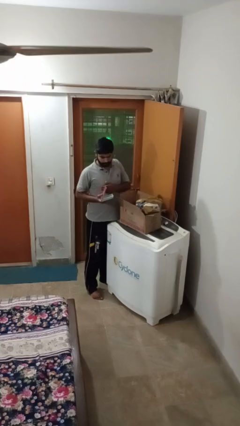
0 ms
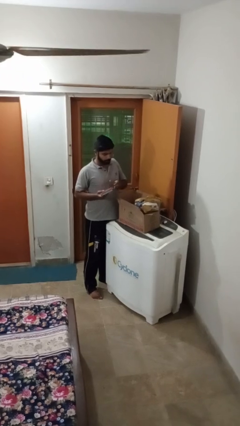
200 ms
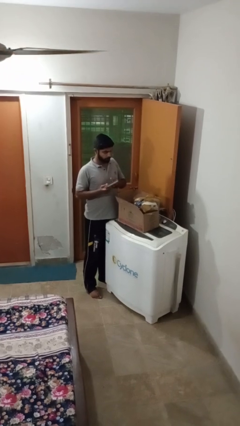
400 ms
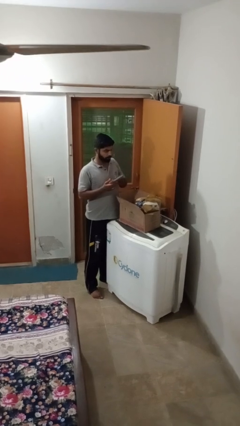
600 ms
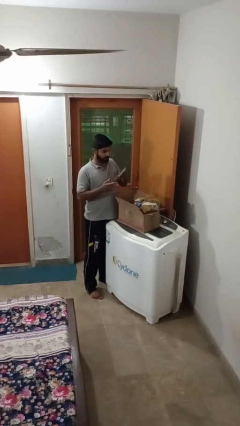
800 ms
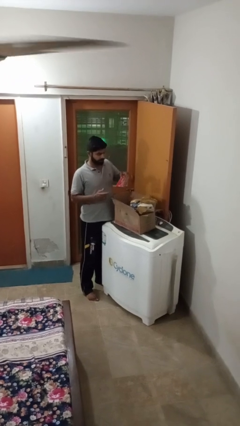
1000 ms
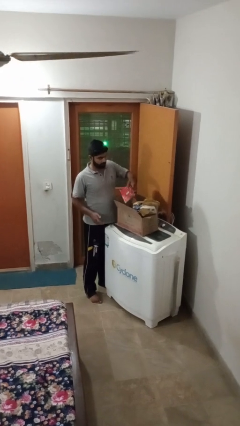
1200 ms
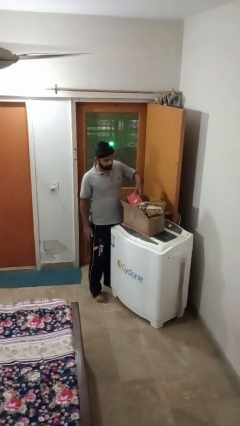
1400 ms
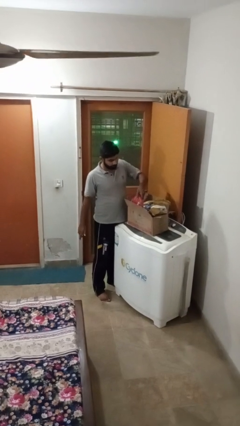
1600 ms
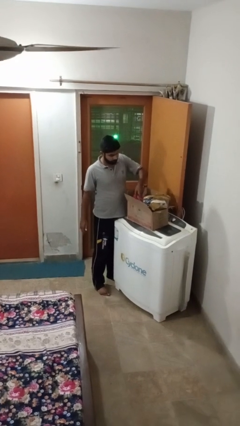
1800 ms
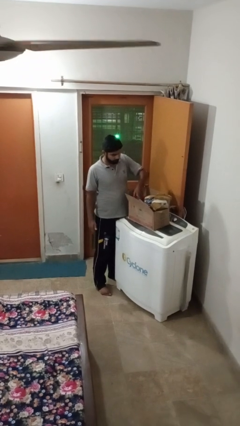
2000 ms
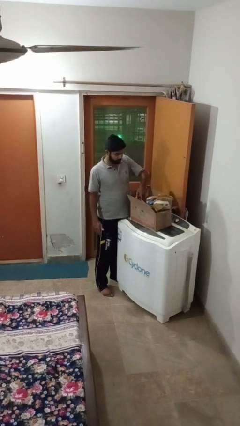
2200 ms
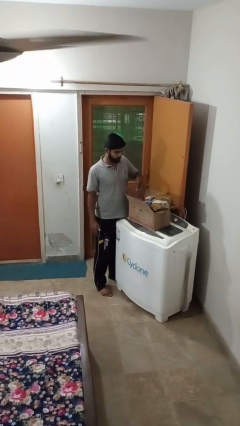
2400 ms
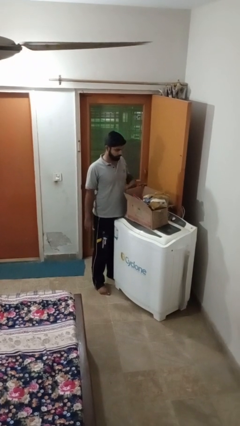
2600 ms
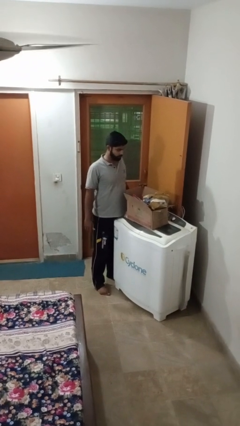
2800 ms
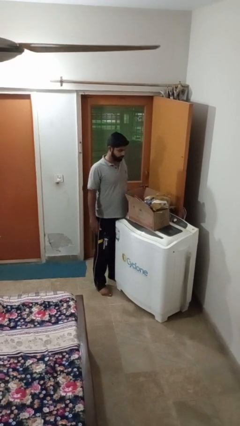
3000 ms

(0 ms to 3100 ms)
person puts object into box

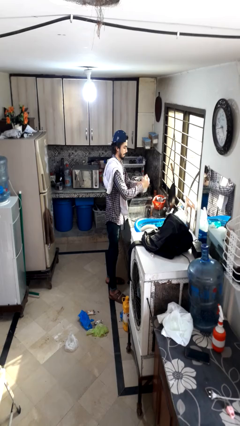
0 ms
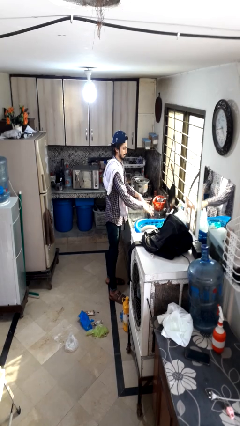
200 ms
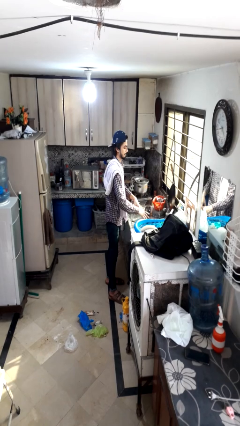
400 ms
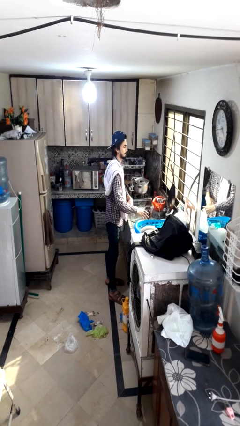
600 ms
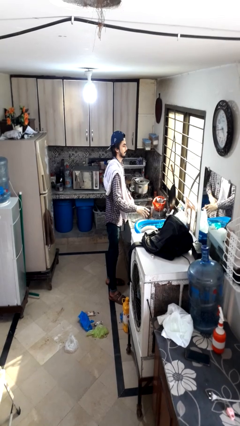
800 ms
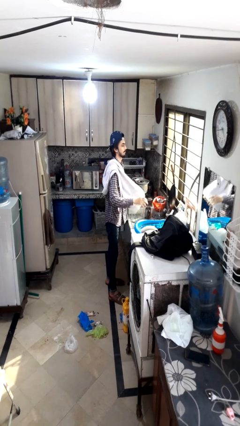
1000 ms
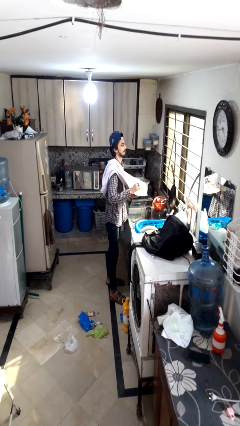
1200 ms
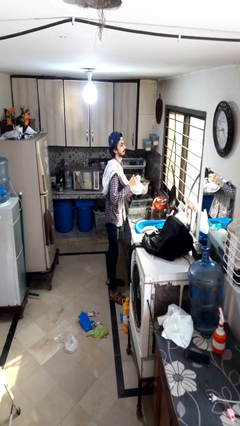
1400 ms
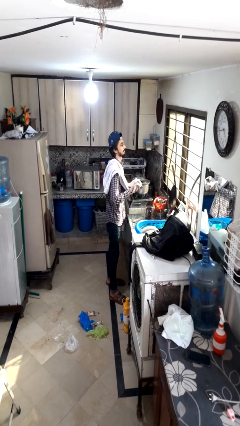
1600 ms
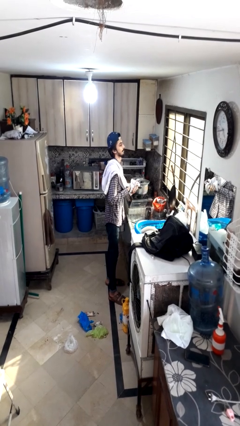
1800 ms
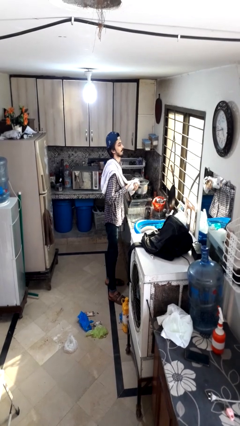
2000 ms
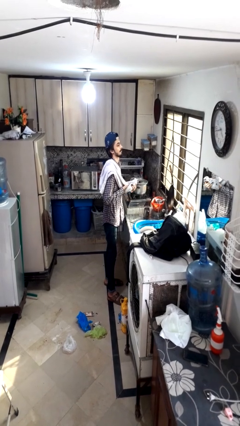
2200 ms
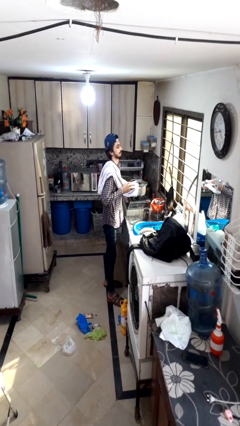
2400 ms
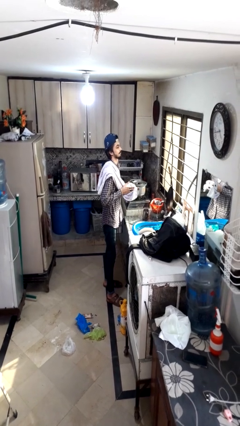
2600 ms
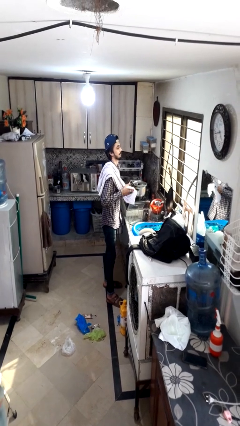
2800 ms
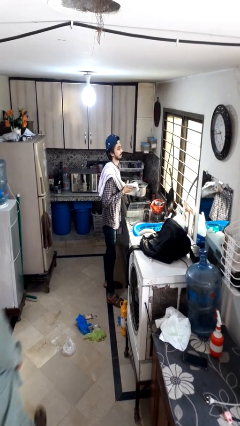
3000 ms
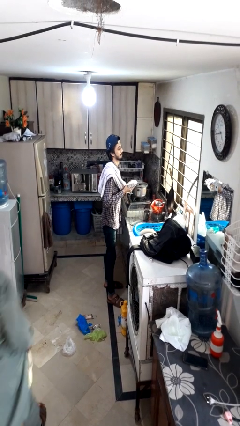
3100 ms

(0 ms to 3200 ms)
person dries hands with towel

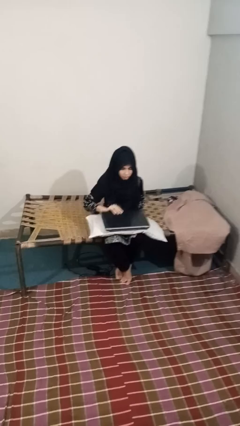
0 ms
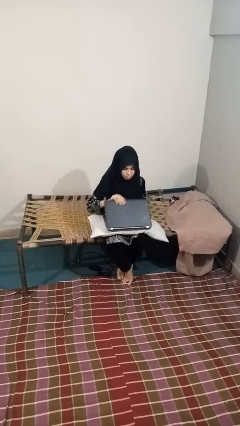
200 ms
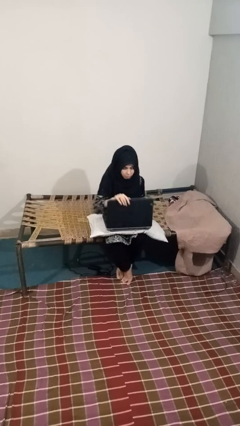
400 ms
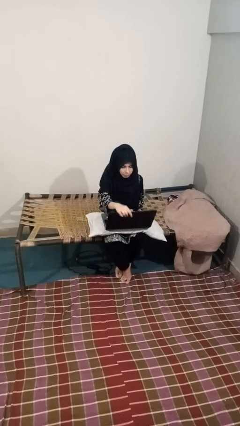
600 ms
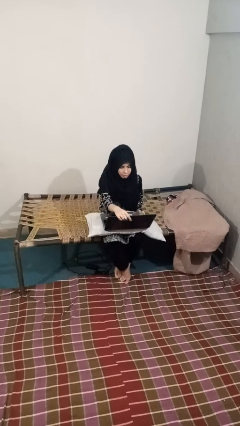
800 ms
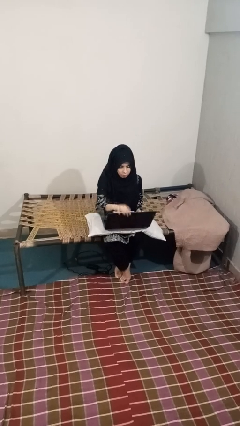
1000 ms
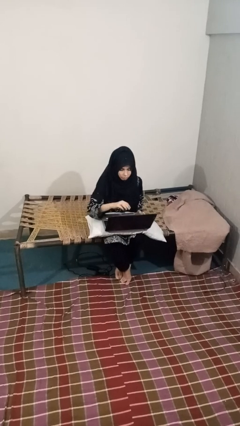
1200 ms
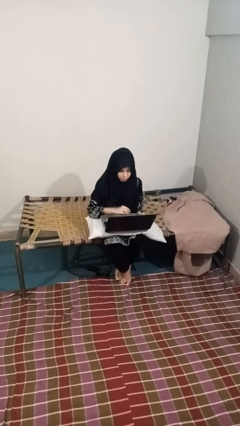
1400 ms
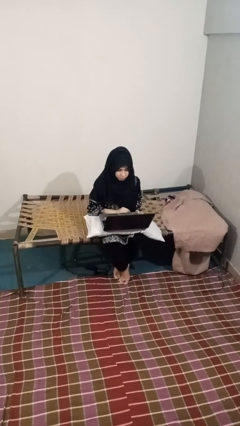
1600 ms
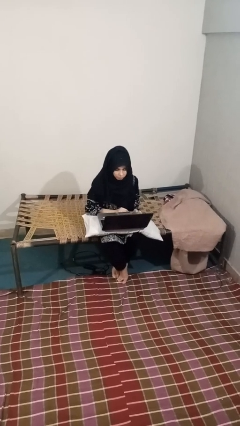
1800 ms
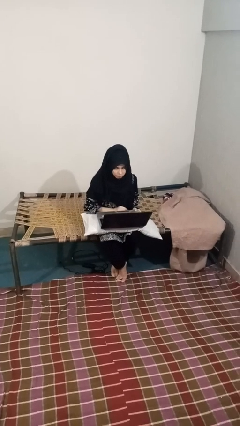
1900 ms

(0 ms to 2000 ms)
person opens laptop

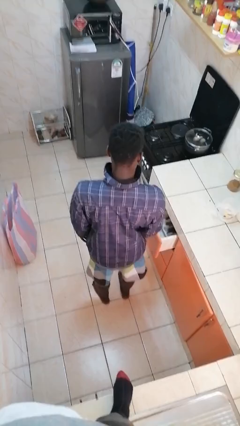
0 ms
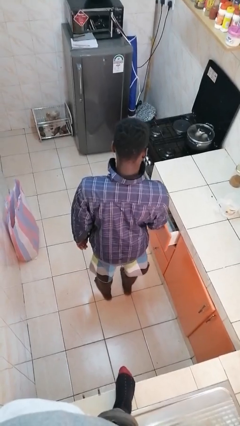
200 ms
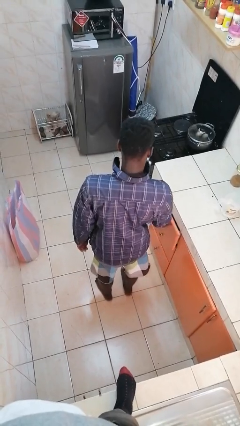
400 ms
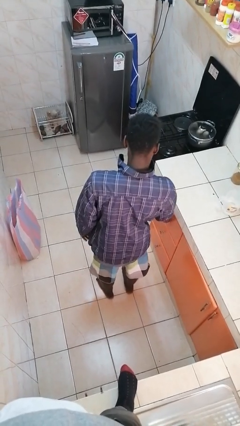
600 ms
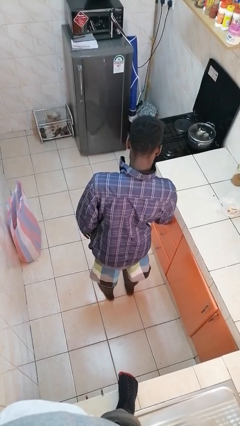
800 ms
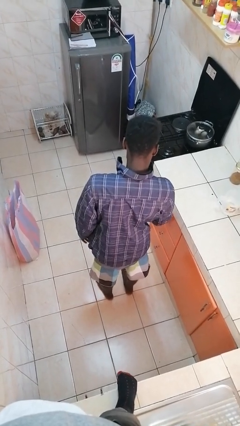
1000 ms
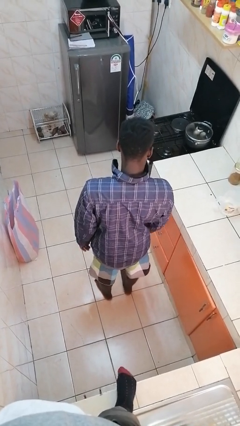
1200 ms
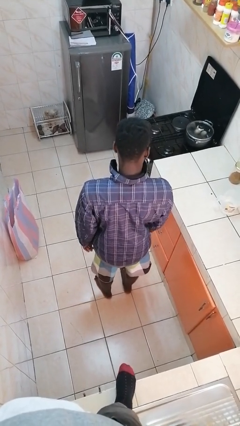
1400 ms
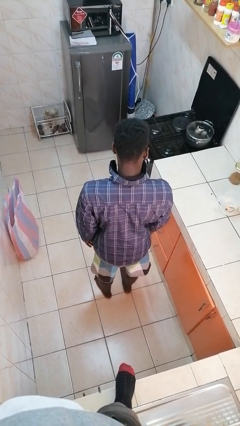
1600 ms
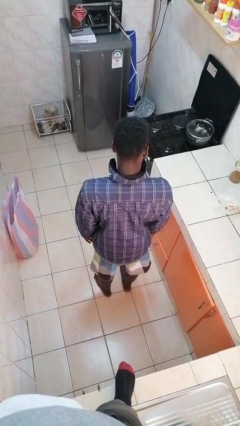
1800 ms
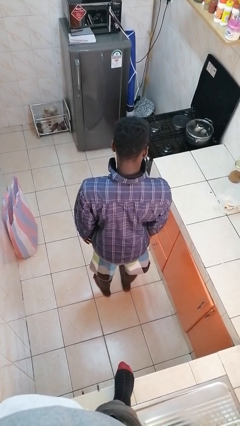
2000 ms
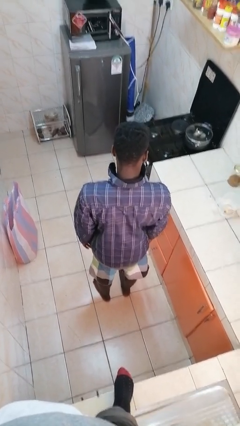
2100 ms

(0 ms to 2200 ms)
person closes kitchen drawer

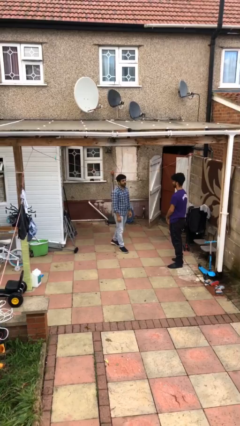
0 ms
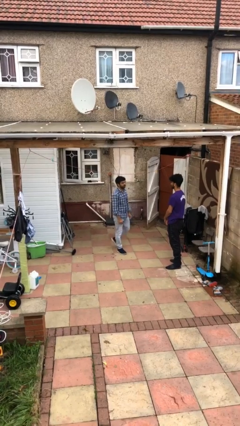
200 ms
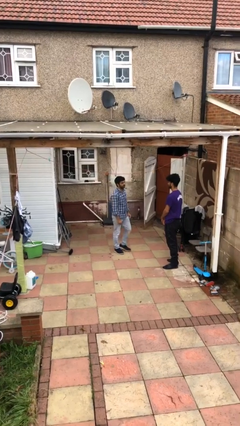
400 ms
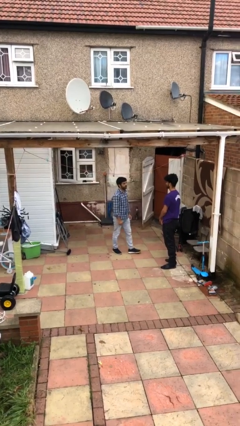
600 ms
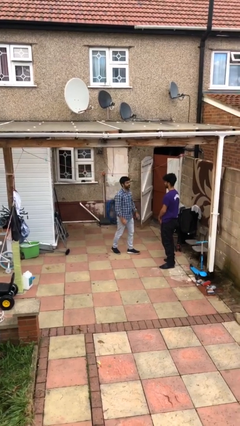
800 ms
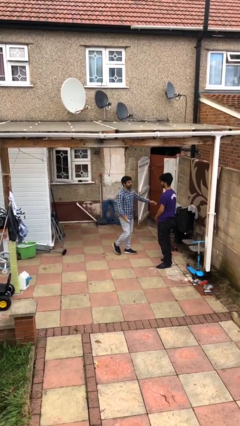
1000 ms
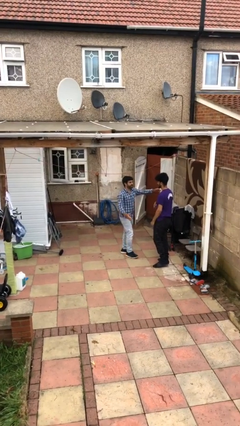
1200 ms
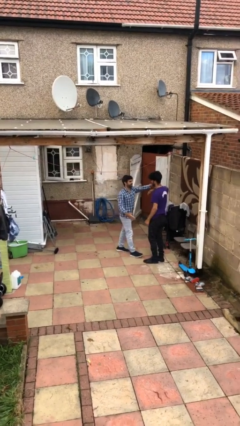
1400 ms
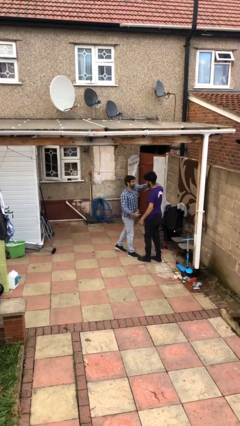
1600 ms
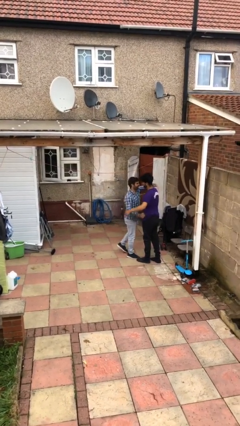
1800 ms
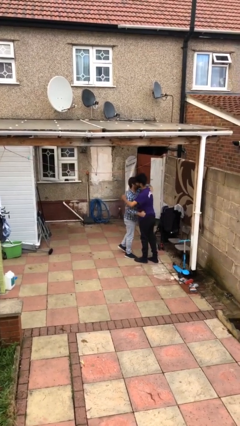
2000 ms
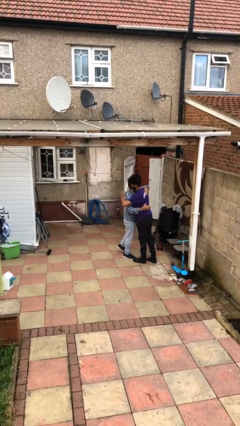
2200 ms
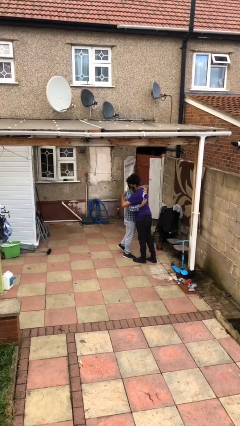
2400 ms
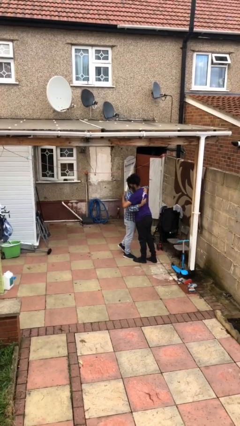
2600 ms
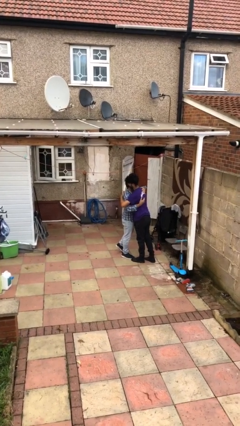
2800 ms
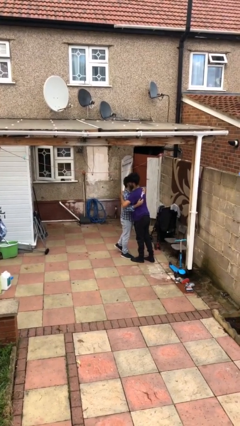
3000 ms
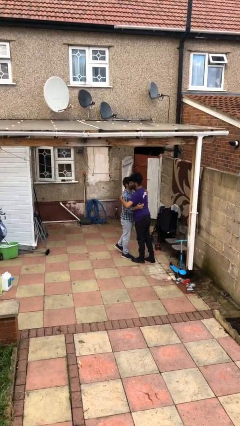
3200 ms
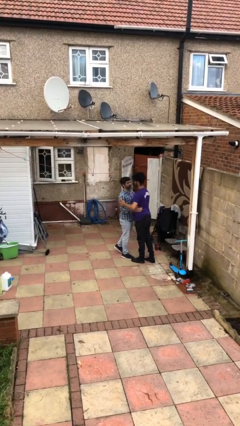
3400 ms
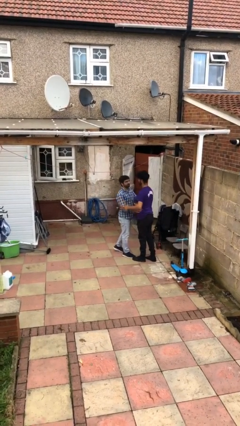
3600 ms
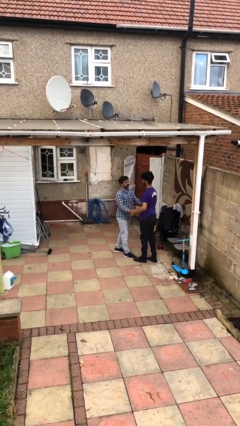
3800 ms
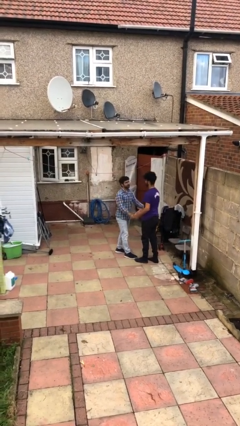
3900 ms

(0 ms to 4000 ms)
person embraces person

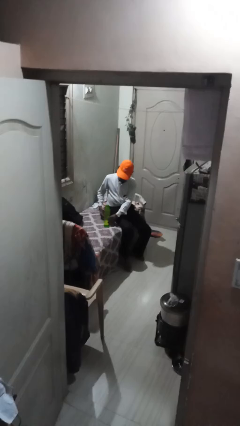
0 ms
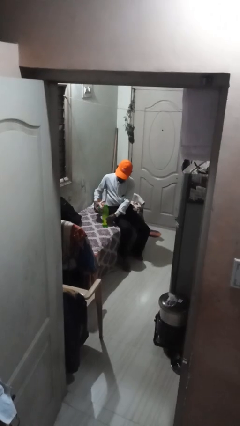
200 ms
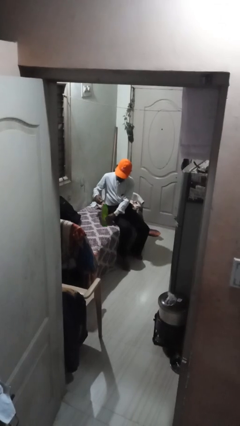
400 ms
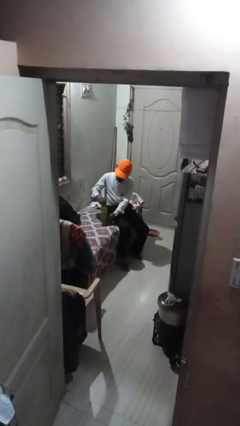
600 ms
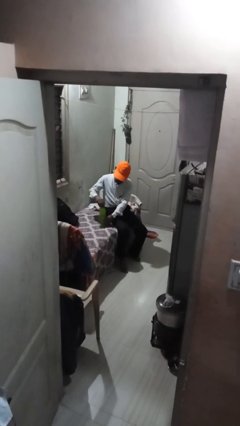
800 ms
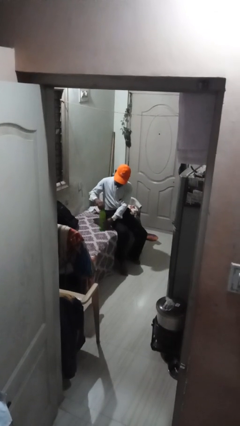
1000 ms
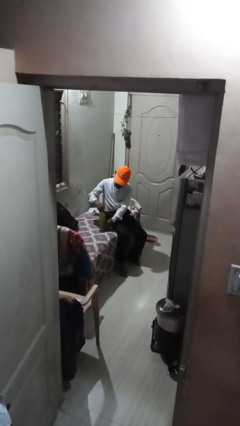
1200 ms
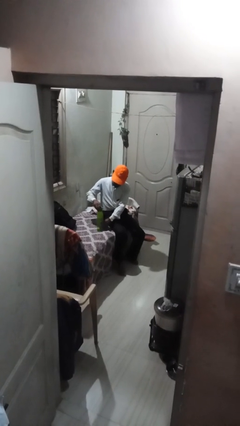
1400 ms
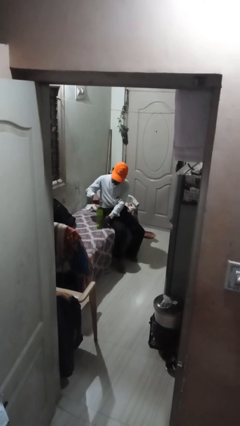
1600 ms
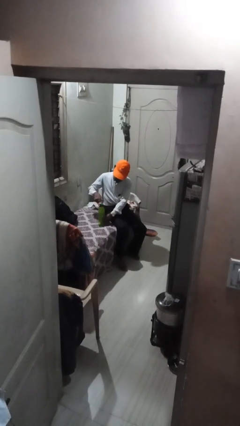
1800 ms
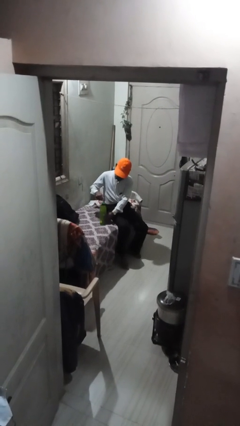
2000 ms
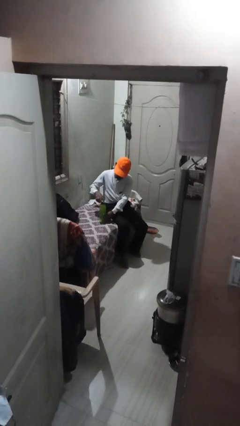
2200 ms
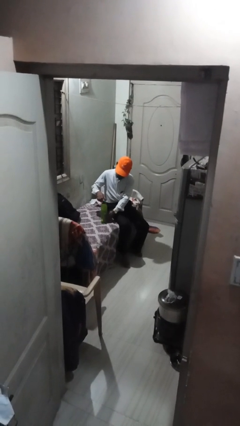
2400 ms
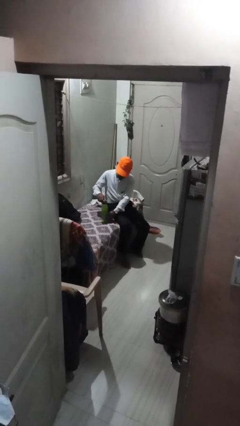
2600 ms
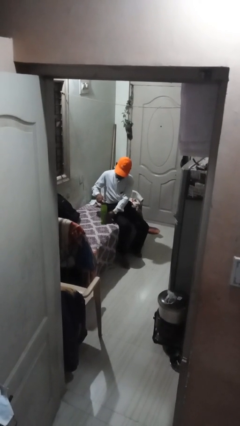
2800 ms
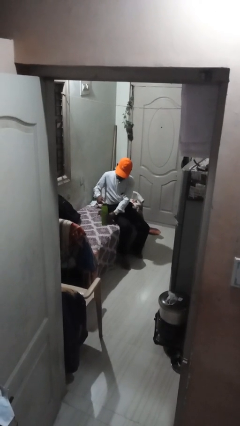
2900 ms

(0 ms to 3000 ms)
person screws lid to bottle

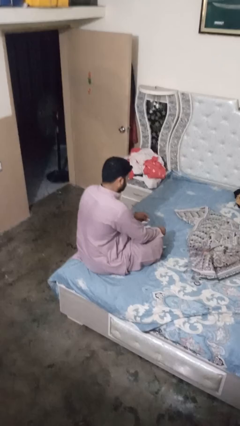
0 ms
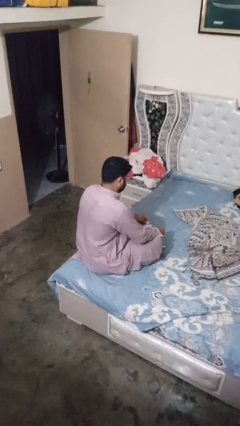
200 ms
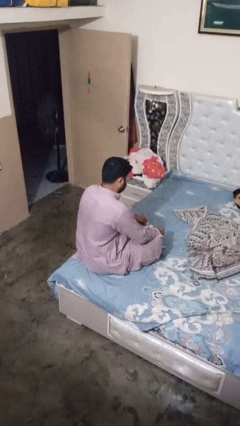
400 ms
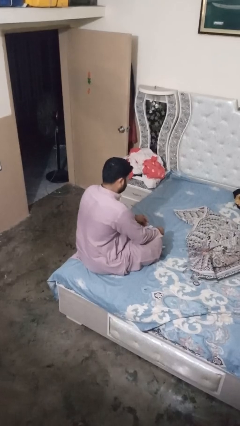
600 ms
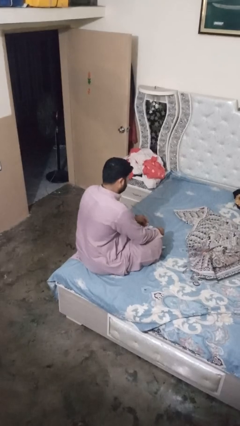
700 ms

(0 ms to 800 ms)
person tears paper
